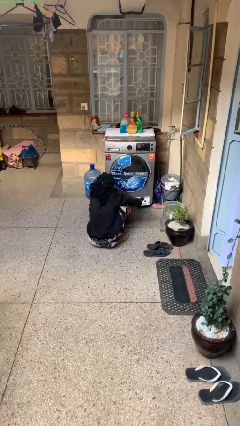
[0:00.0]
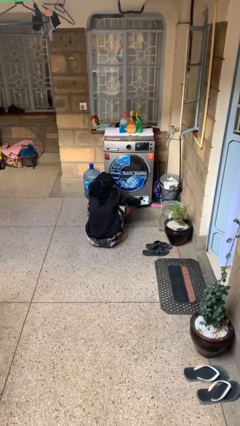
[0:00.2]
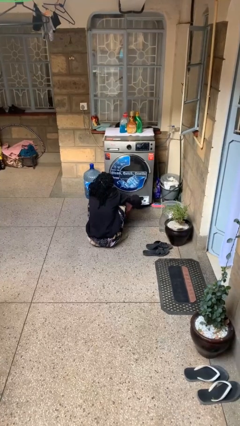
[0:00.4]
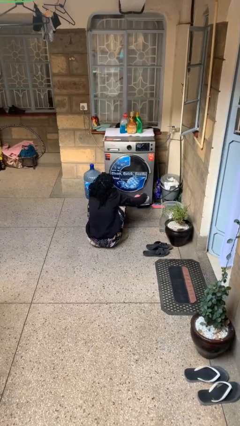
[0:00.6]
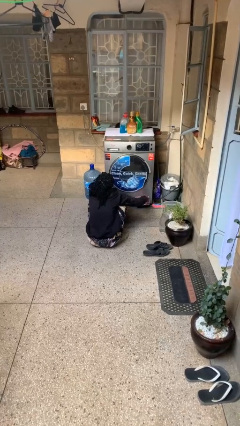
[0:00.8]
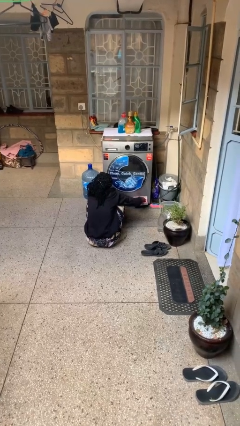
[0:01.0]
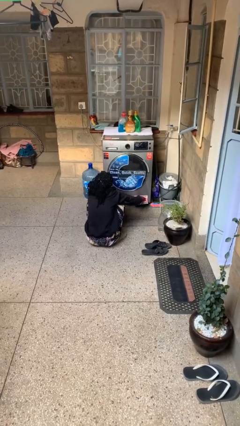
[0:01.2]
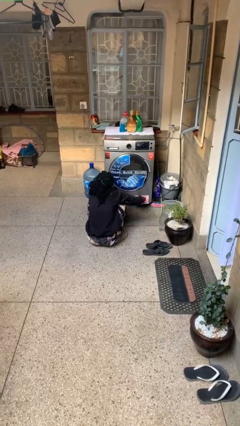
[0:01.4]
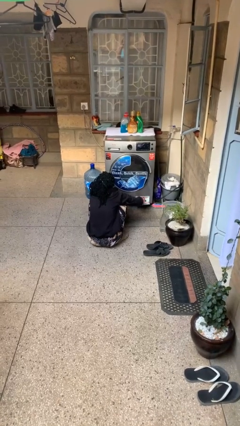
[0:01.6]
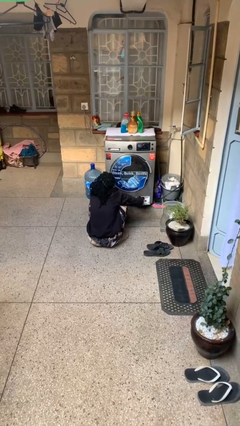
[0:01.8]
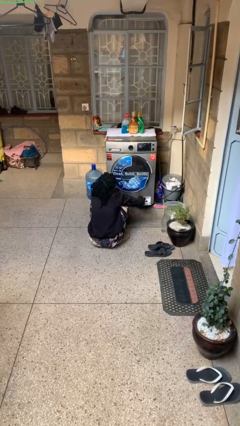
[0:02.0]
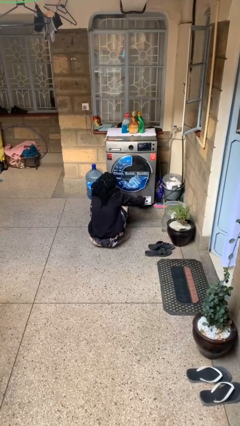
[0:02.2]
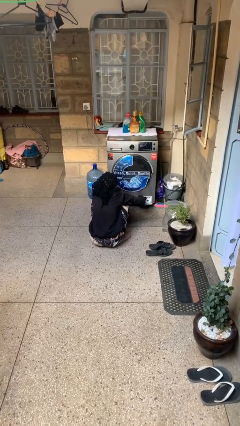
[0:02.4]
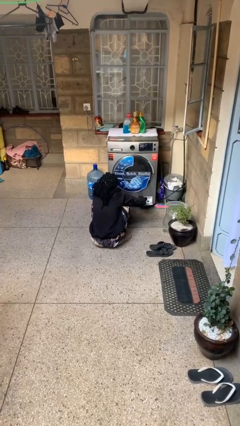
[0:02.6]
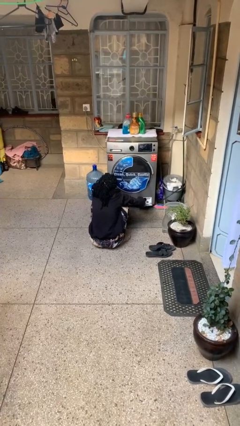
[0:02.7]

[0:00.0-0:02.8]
person cleans dryer lint trap

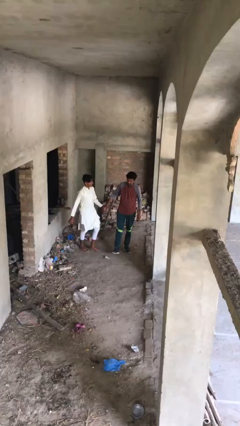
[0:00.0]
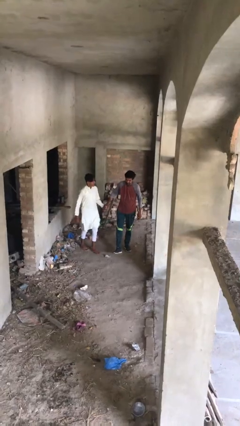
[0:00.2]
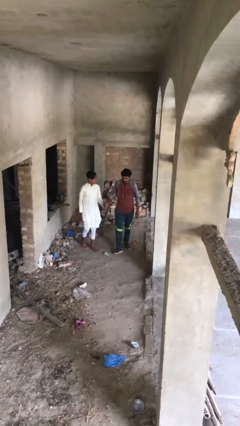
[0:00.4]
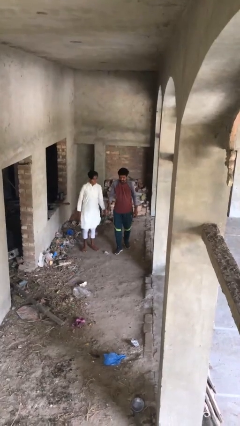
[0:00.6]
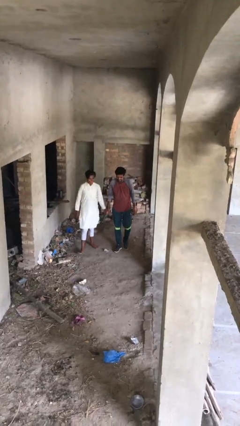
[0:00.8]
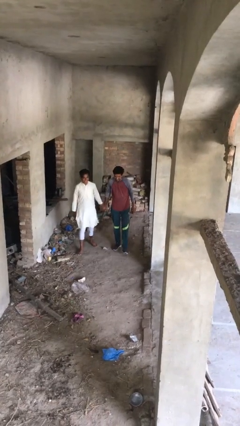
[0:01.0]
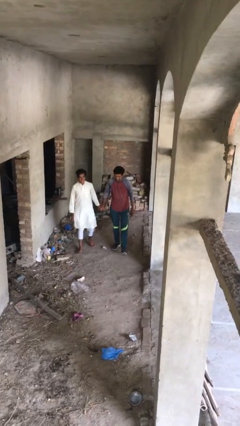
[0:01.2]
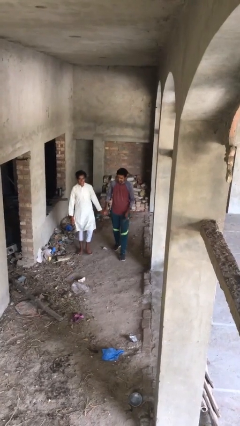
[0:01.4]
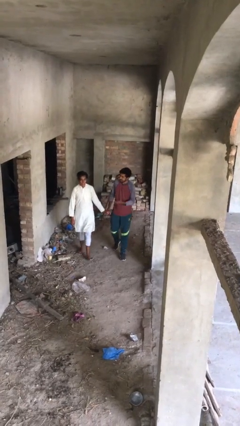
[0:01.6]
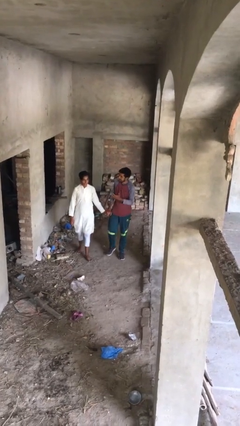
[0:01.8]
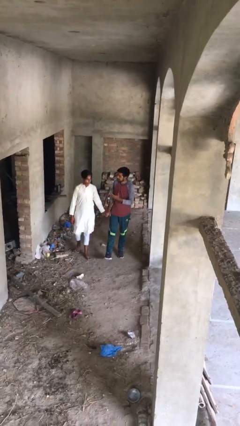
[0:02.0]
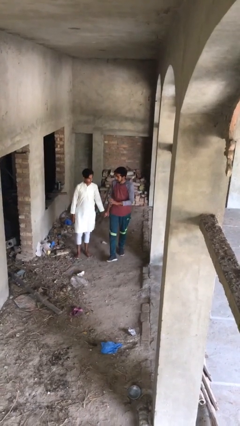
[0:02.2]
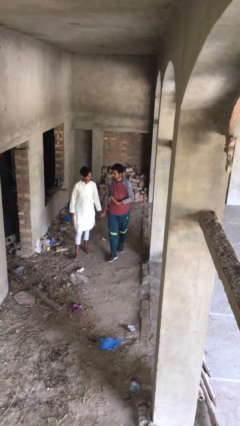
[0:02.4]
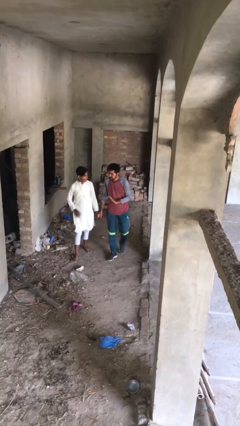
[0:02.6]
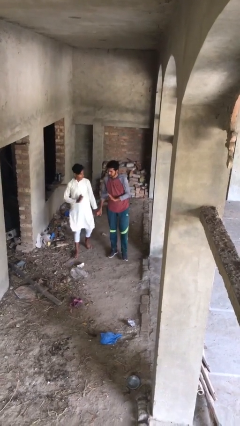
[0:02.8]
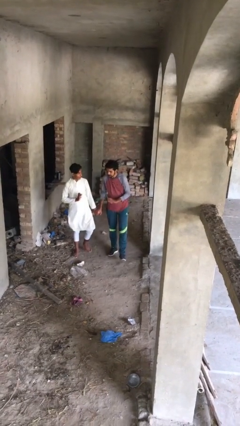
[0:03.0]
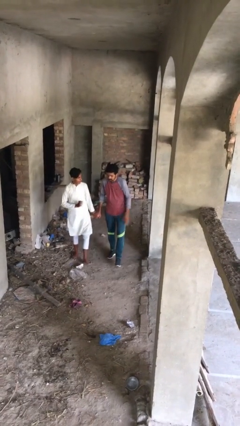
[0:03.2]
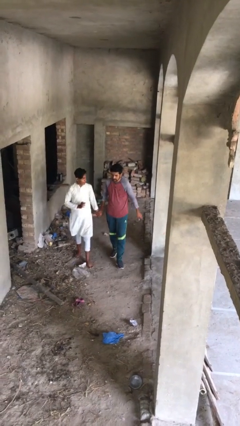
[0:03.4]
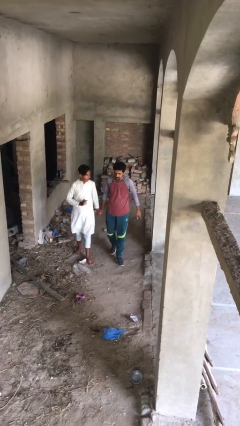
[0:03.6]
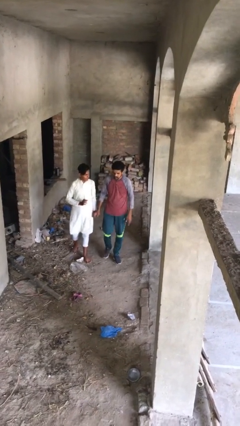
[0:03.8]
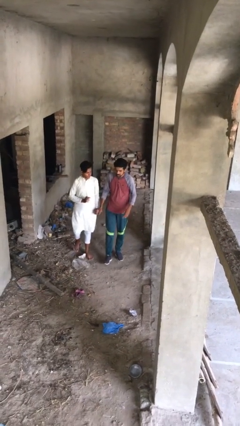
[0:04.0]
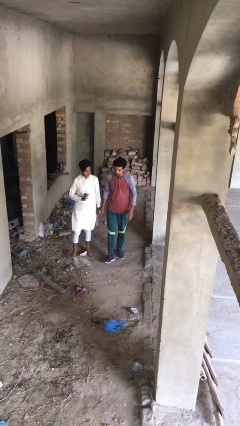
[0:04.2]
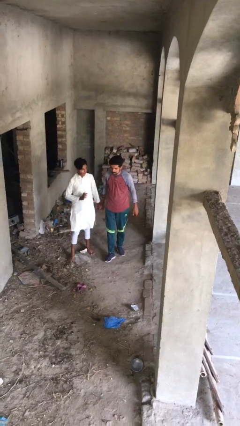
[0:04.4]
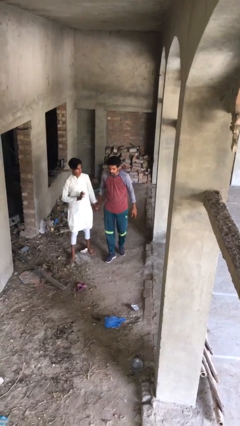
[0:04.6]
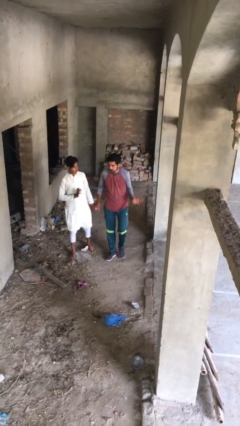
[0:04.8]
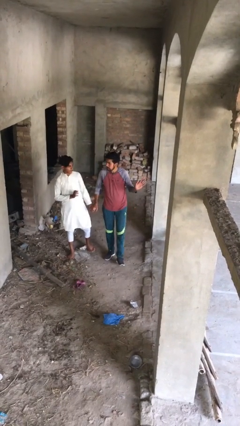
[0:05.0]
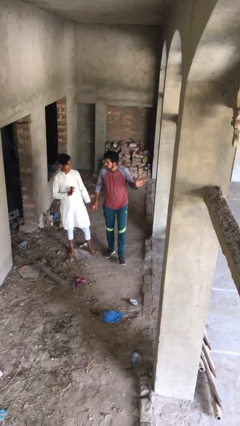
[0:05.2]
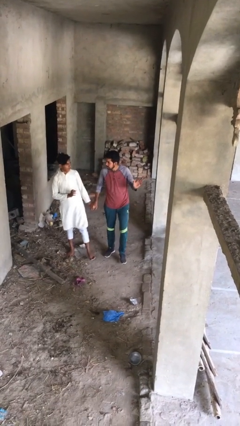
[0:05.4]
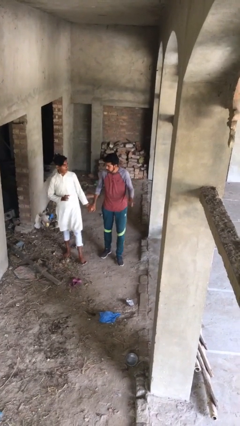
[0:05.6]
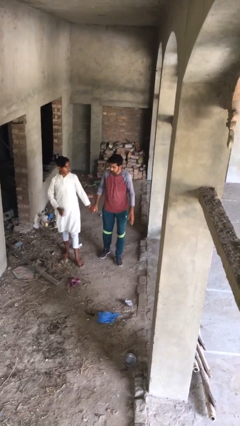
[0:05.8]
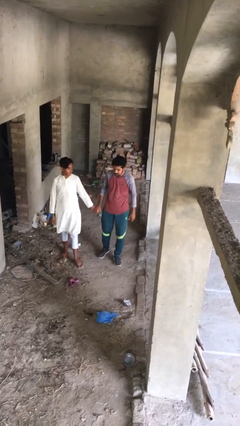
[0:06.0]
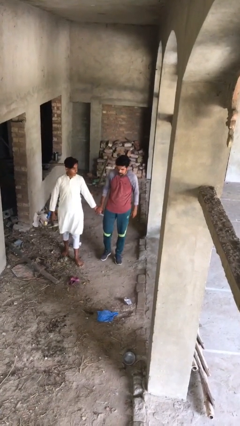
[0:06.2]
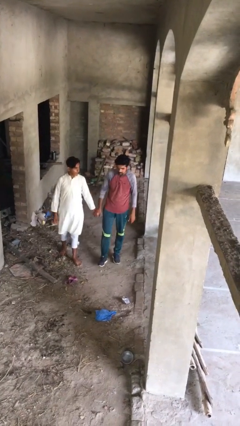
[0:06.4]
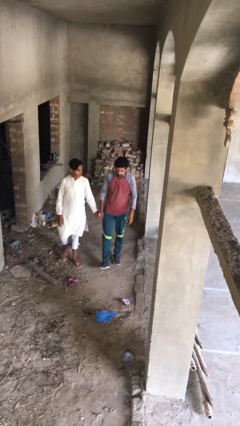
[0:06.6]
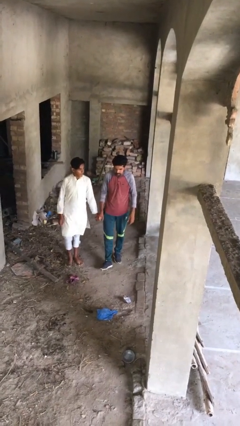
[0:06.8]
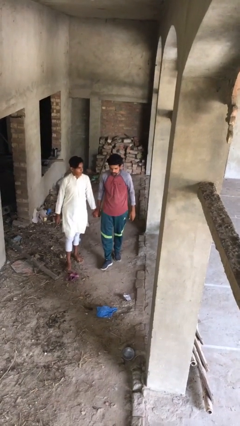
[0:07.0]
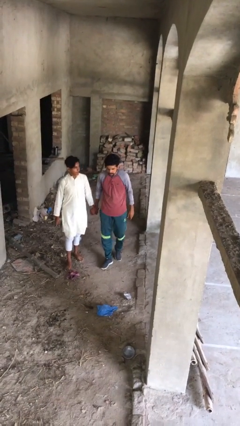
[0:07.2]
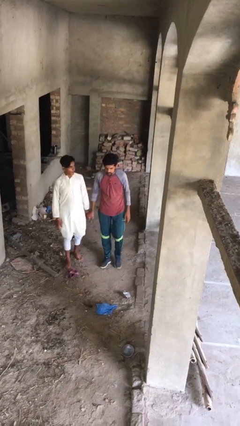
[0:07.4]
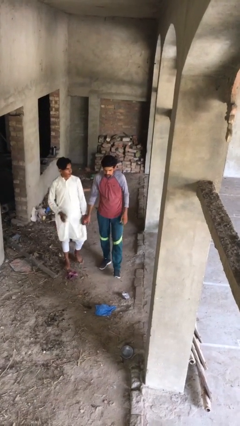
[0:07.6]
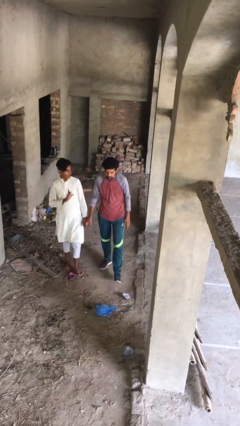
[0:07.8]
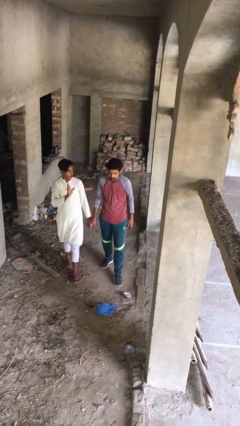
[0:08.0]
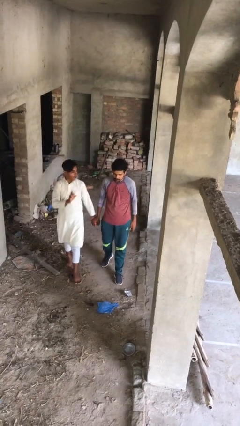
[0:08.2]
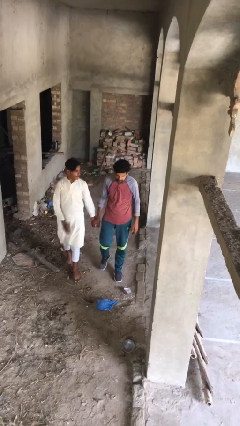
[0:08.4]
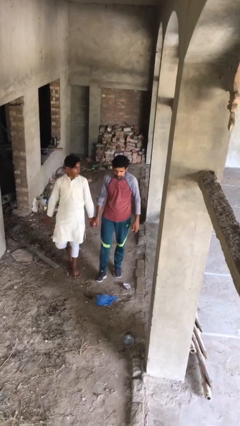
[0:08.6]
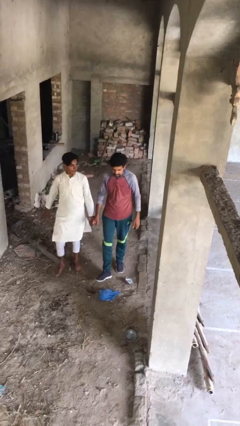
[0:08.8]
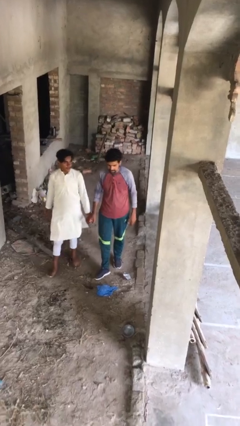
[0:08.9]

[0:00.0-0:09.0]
person holds hand

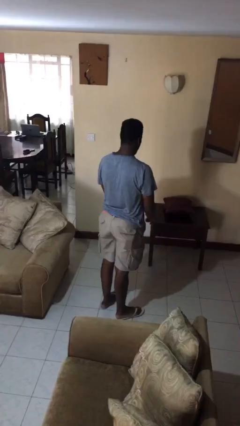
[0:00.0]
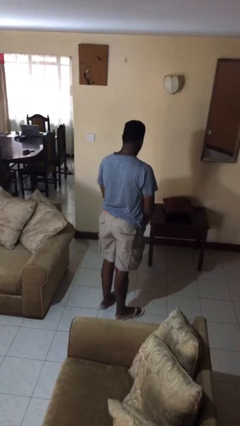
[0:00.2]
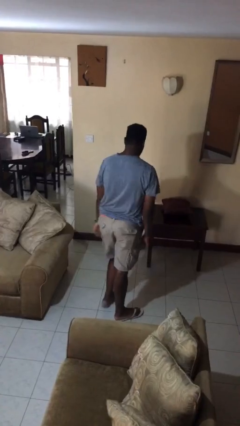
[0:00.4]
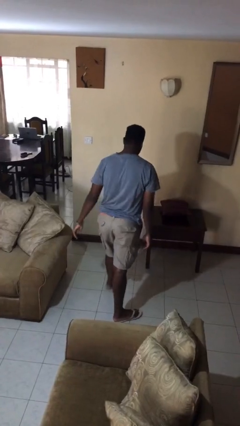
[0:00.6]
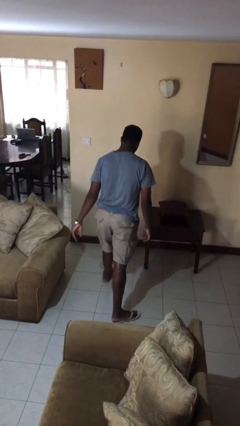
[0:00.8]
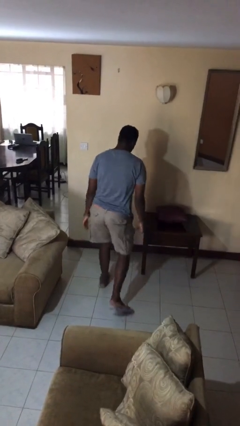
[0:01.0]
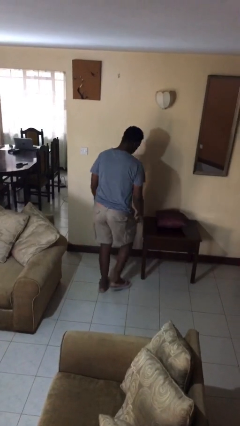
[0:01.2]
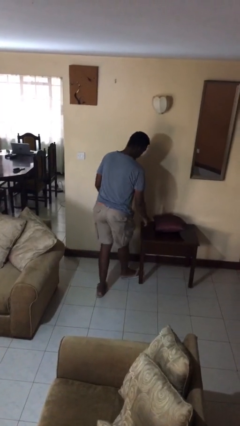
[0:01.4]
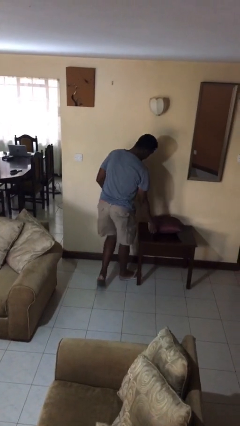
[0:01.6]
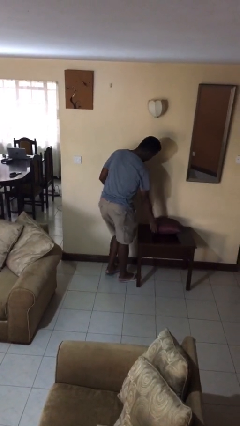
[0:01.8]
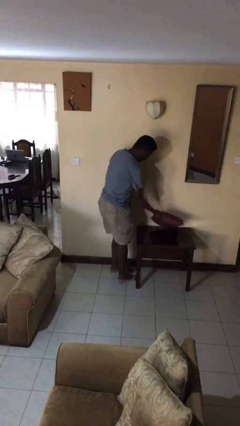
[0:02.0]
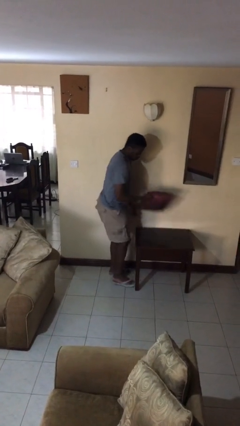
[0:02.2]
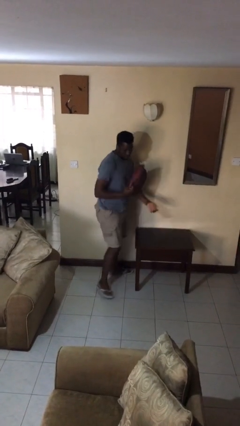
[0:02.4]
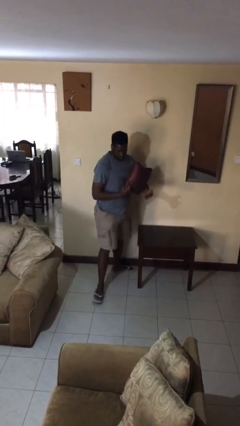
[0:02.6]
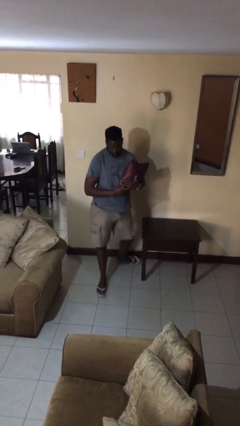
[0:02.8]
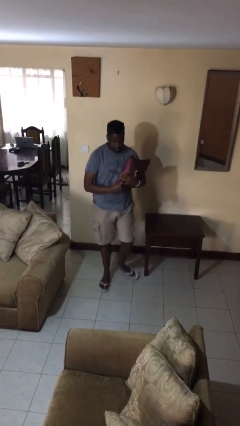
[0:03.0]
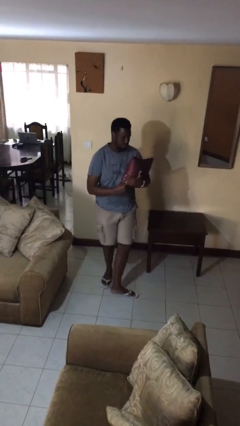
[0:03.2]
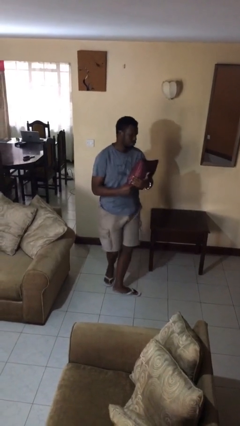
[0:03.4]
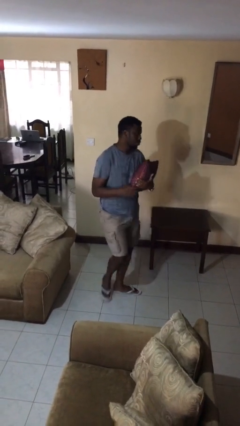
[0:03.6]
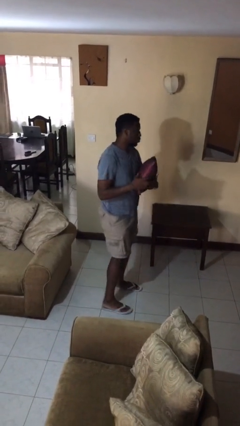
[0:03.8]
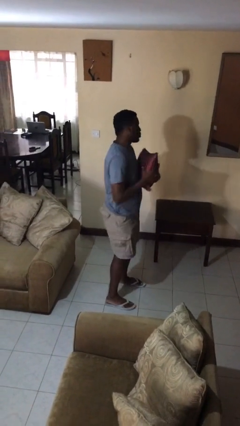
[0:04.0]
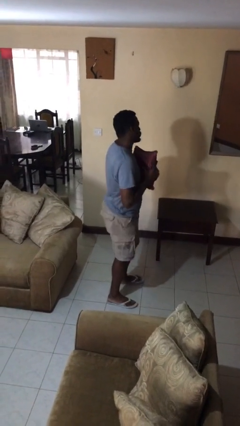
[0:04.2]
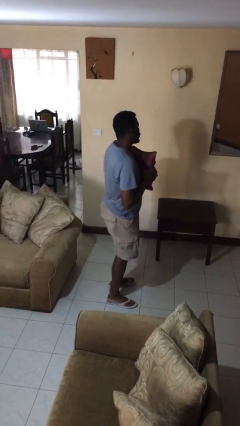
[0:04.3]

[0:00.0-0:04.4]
person picks up object from table

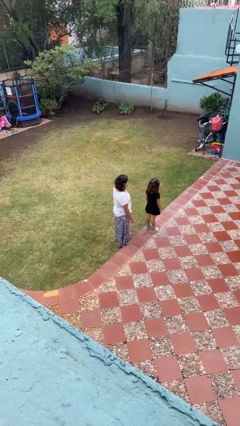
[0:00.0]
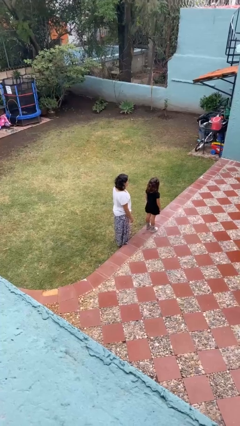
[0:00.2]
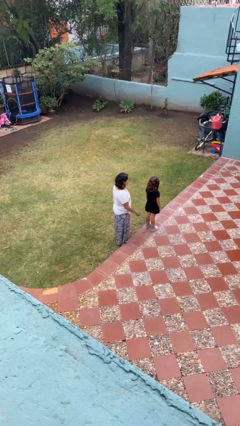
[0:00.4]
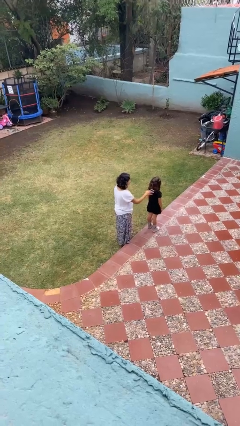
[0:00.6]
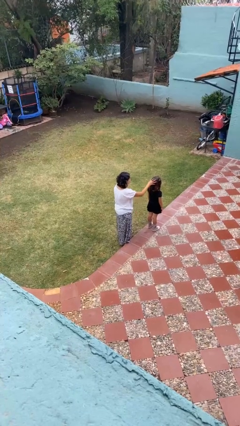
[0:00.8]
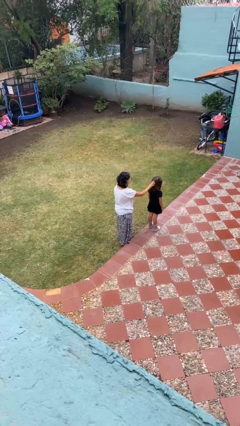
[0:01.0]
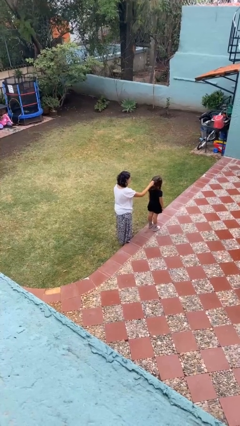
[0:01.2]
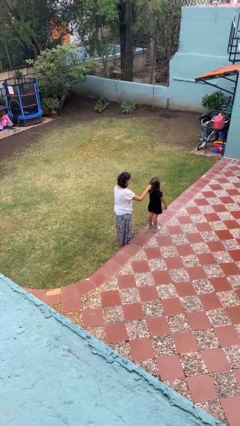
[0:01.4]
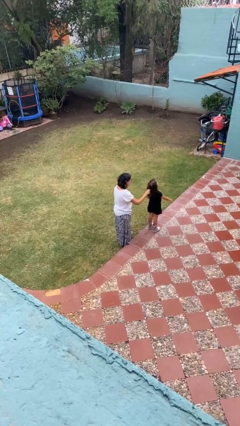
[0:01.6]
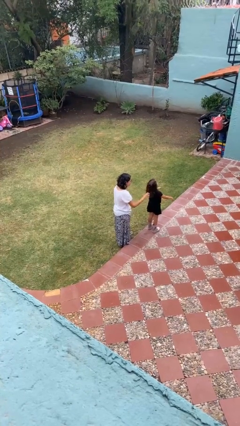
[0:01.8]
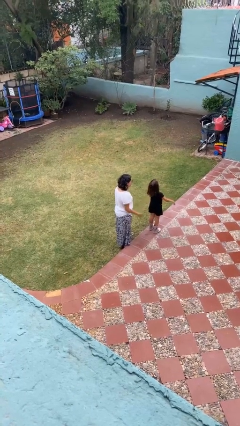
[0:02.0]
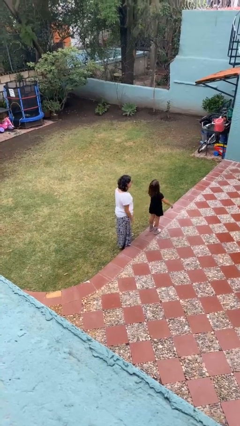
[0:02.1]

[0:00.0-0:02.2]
person grabs person by hair
